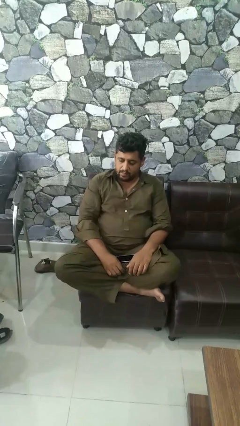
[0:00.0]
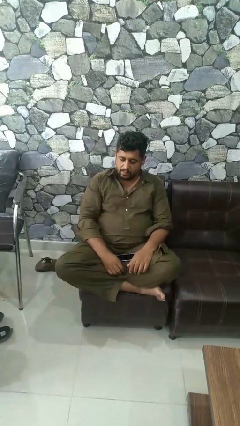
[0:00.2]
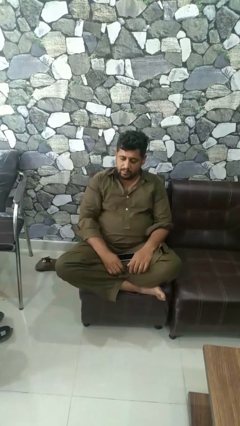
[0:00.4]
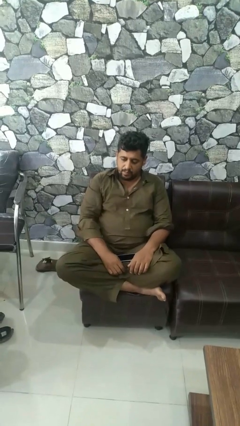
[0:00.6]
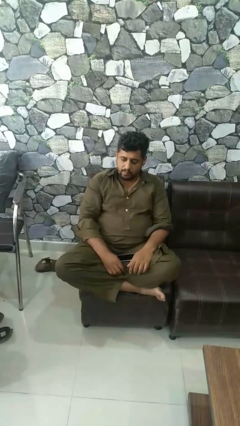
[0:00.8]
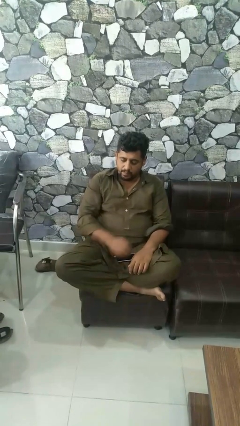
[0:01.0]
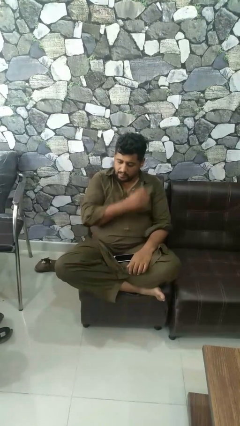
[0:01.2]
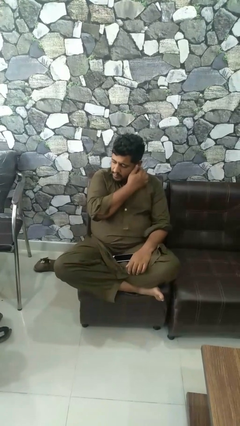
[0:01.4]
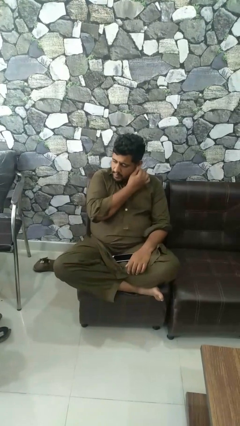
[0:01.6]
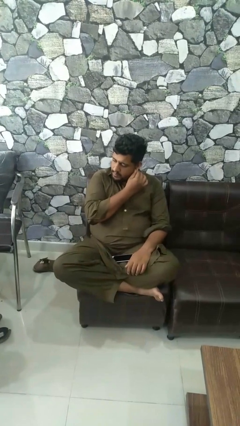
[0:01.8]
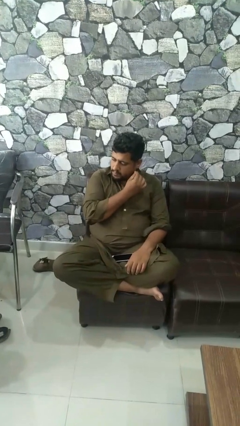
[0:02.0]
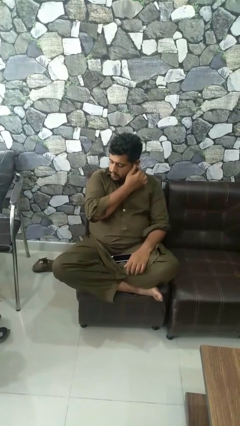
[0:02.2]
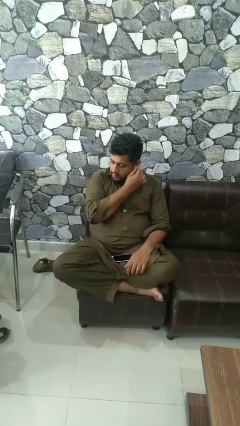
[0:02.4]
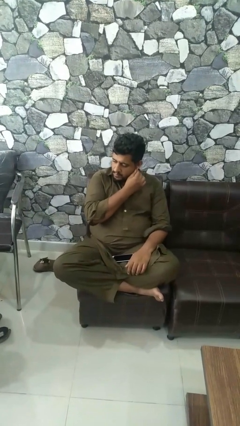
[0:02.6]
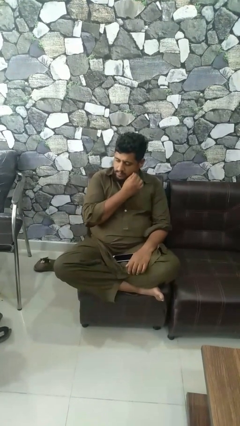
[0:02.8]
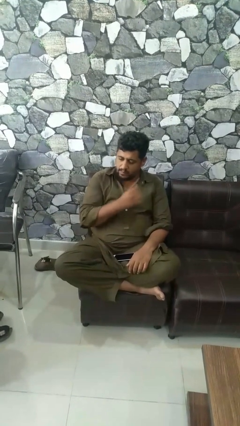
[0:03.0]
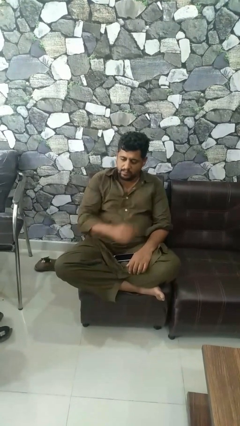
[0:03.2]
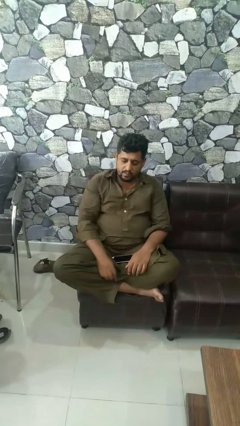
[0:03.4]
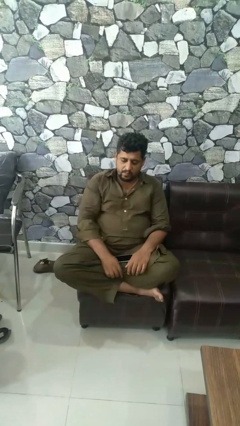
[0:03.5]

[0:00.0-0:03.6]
person touches earlobe

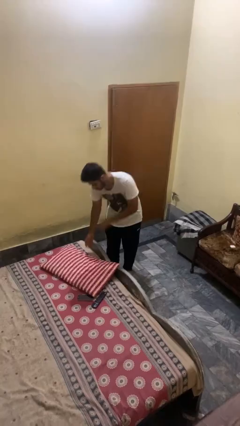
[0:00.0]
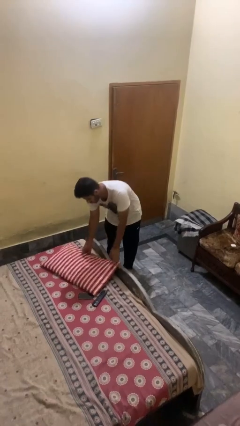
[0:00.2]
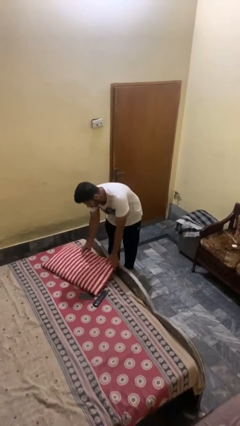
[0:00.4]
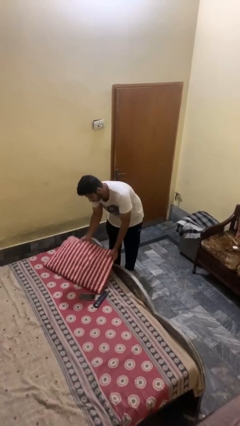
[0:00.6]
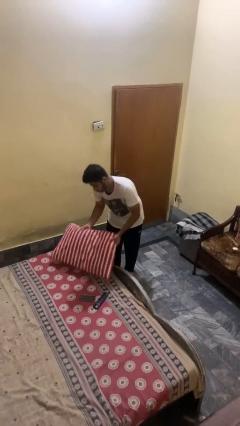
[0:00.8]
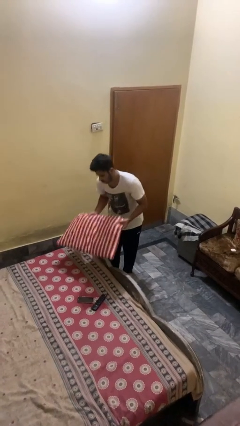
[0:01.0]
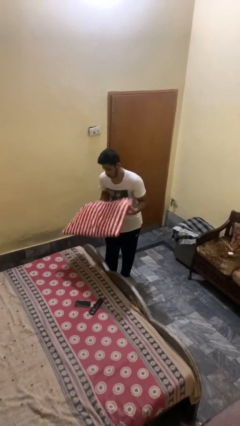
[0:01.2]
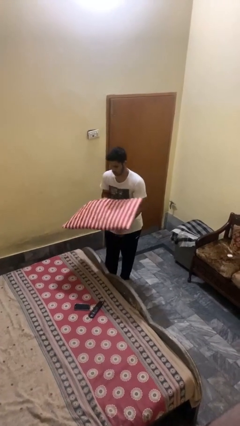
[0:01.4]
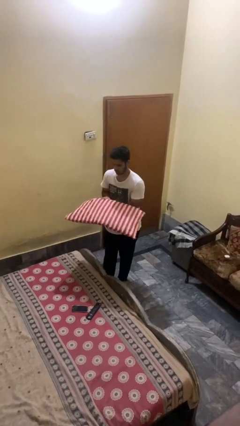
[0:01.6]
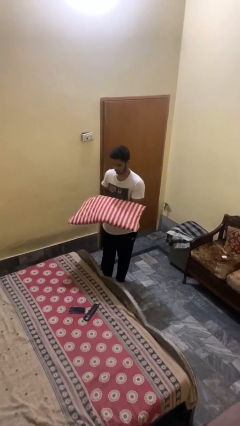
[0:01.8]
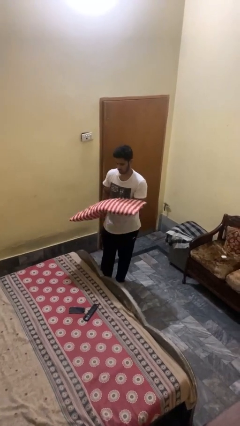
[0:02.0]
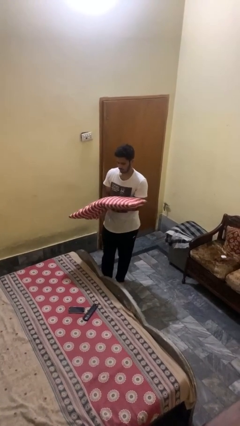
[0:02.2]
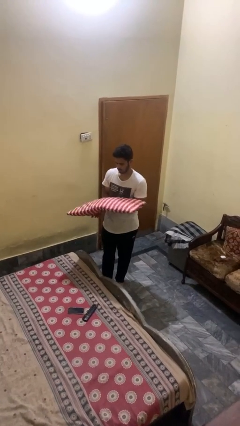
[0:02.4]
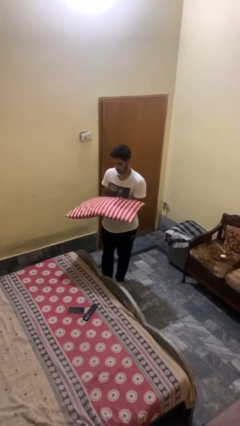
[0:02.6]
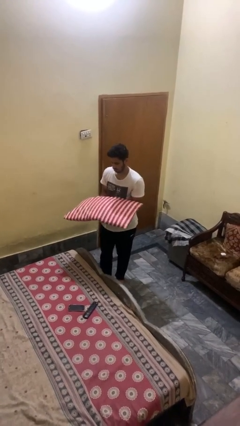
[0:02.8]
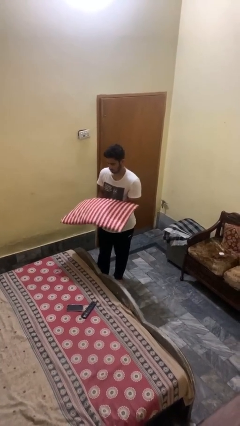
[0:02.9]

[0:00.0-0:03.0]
person picks up object from bed

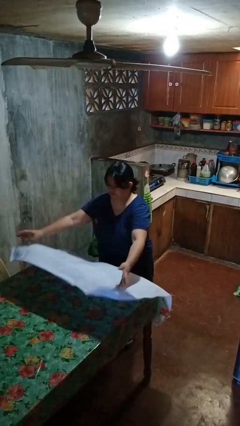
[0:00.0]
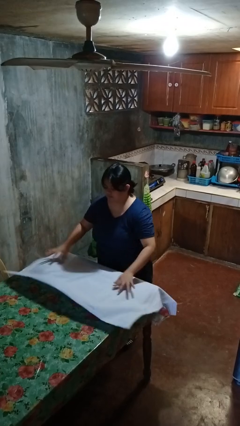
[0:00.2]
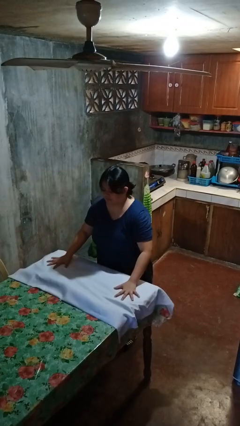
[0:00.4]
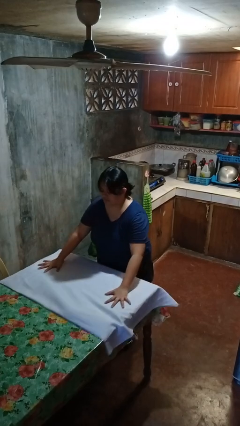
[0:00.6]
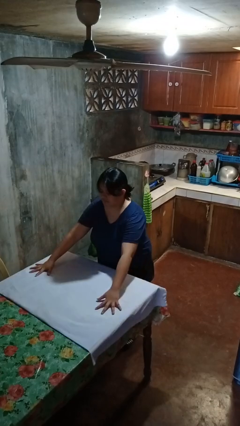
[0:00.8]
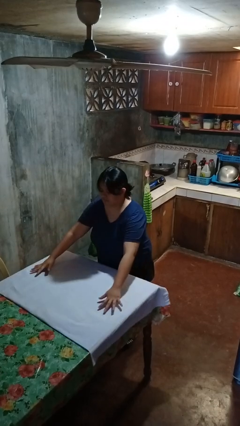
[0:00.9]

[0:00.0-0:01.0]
person spreads tablecloth

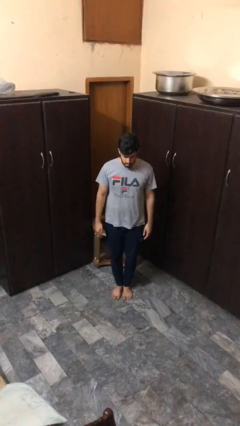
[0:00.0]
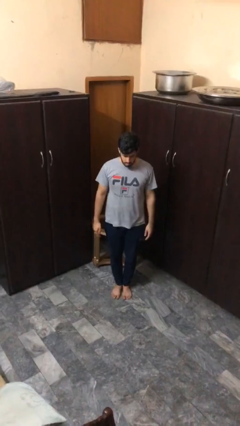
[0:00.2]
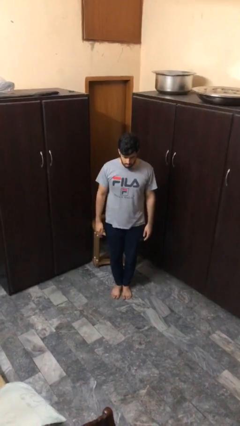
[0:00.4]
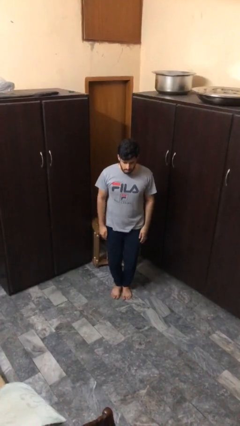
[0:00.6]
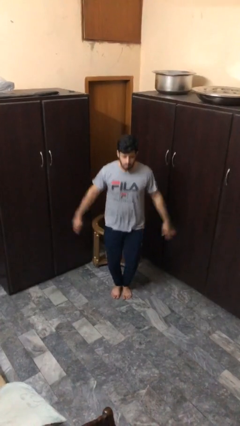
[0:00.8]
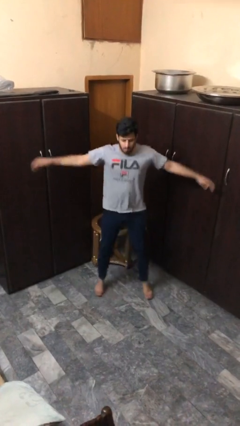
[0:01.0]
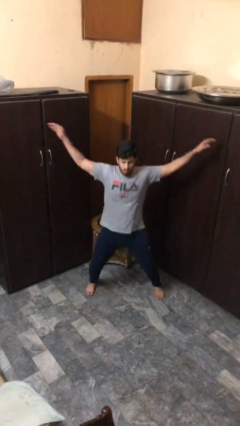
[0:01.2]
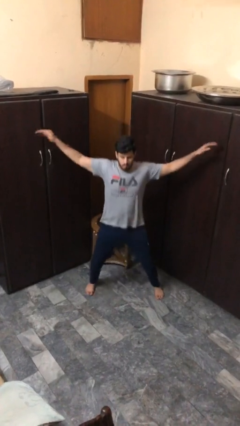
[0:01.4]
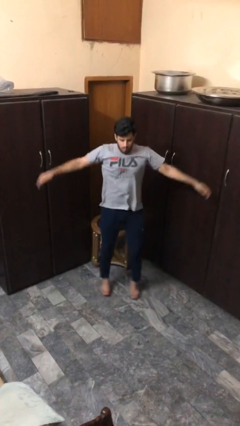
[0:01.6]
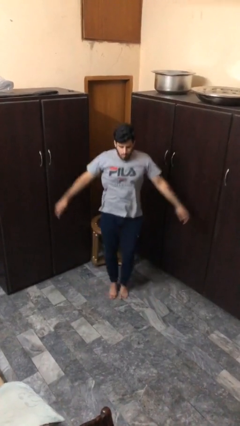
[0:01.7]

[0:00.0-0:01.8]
person exercises with jumping jacks

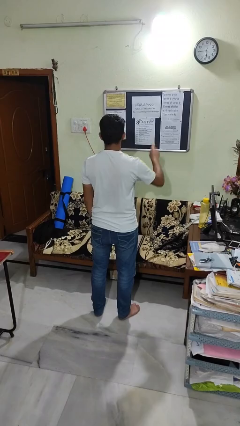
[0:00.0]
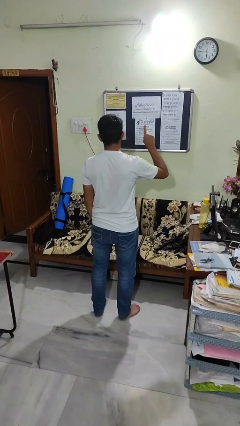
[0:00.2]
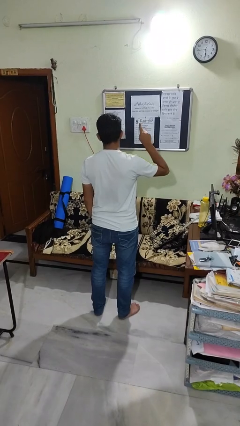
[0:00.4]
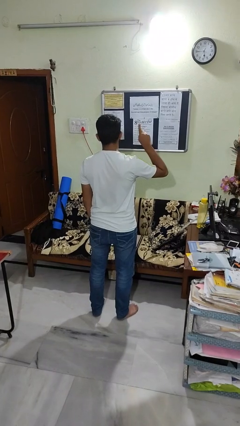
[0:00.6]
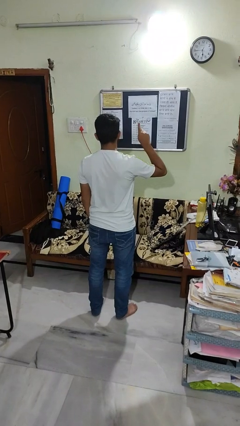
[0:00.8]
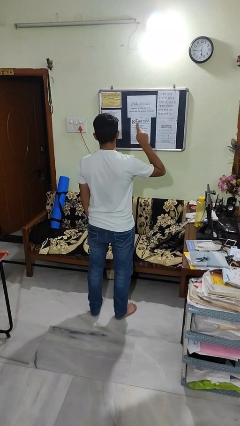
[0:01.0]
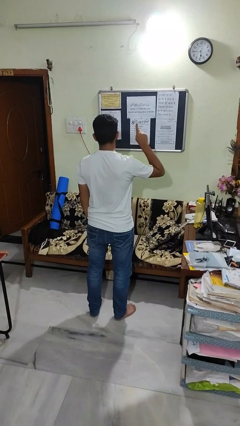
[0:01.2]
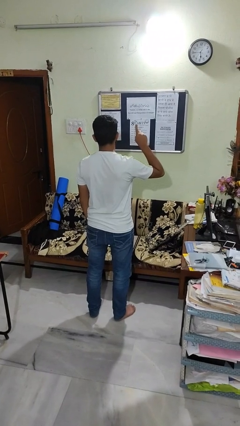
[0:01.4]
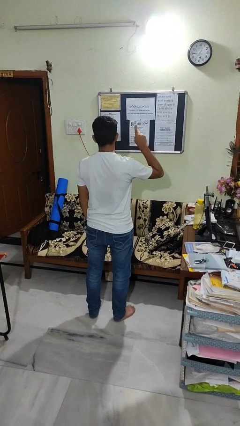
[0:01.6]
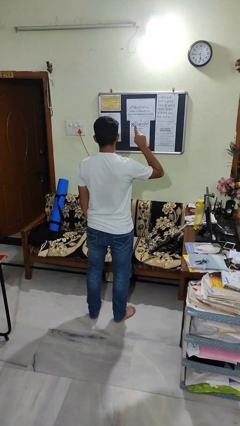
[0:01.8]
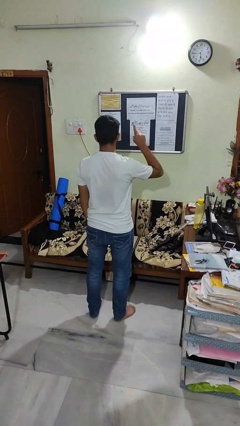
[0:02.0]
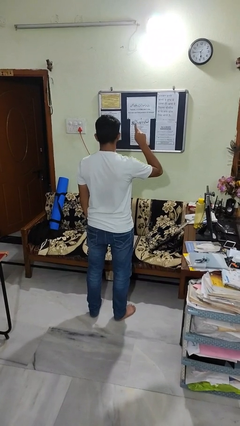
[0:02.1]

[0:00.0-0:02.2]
person gestures number one

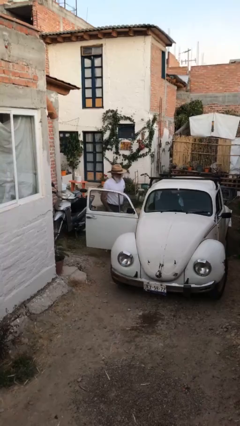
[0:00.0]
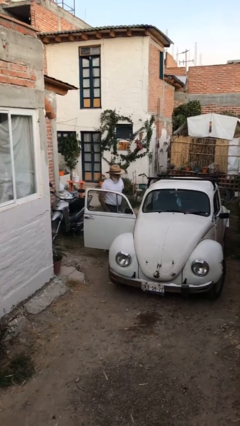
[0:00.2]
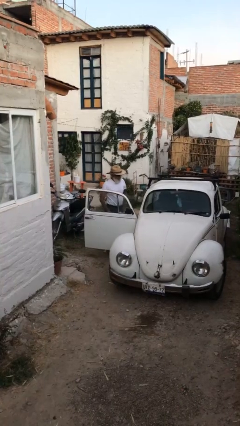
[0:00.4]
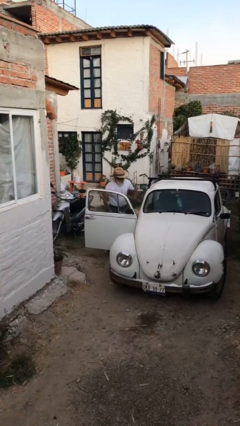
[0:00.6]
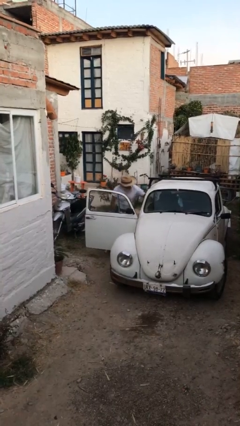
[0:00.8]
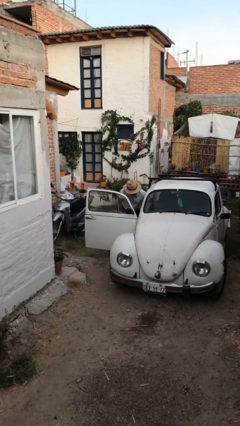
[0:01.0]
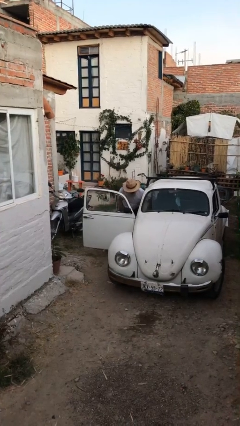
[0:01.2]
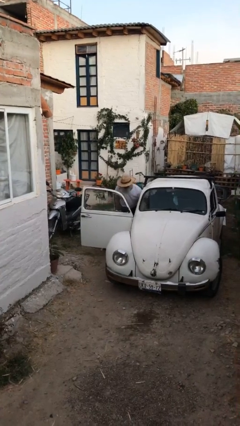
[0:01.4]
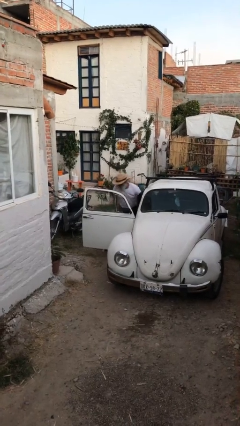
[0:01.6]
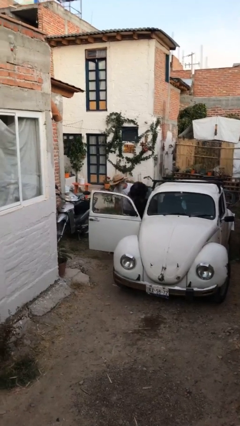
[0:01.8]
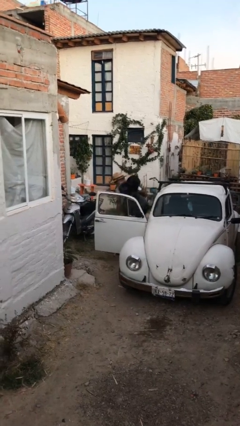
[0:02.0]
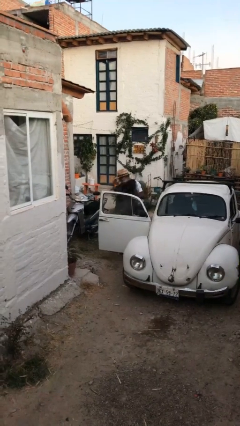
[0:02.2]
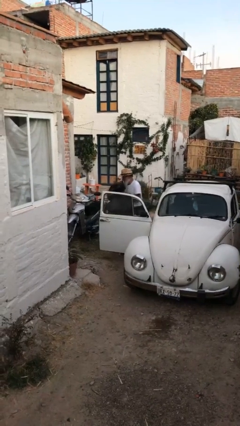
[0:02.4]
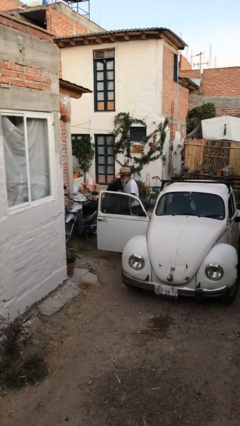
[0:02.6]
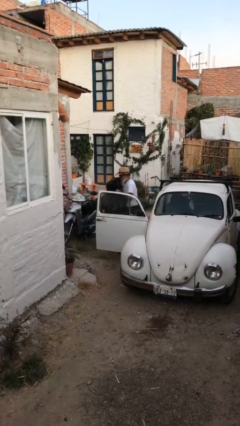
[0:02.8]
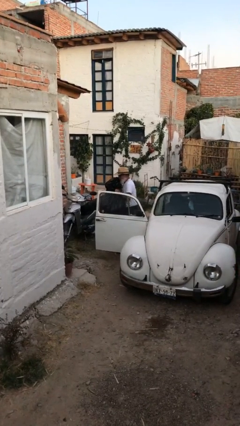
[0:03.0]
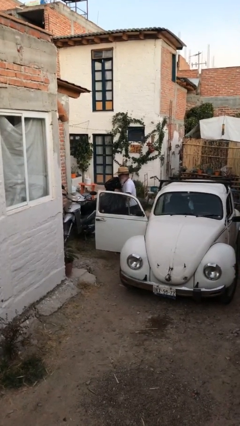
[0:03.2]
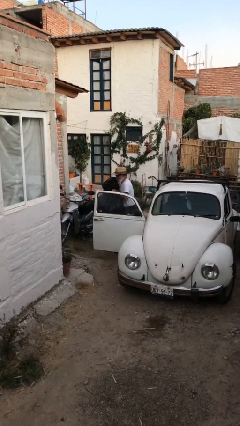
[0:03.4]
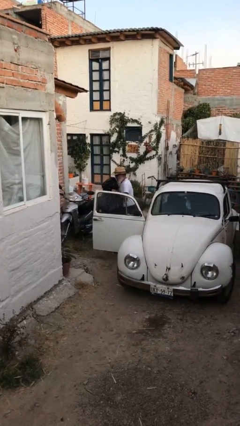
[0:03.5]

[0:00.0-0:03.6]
person unloads car

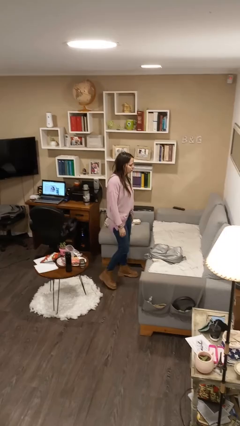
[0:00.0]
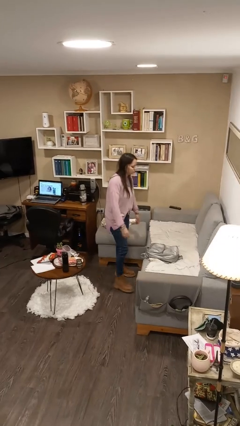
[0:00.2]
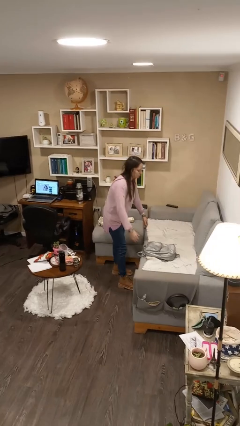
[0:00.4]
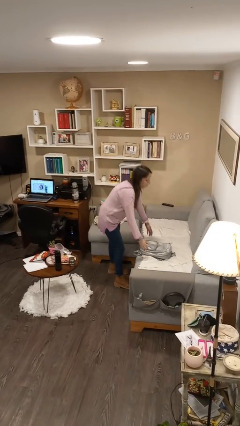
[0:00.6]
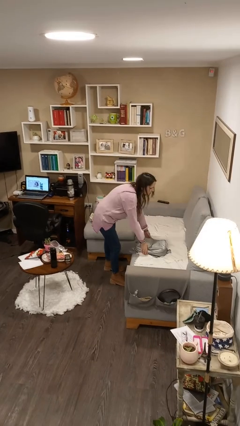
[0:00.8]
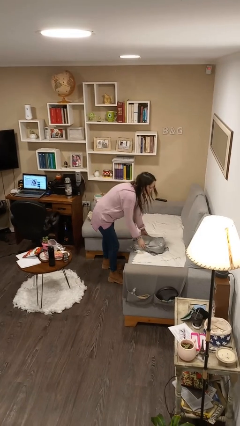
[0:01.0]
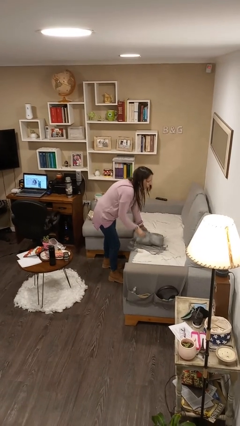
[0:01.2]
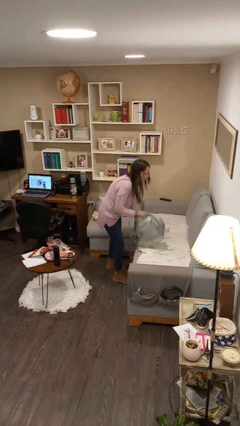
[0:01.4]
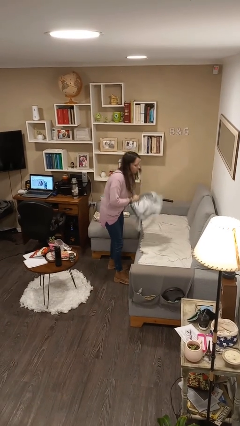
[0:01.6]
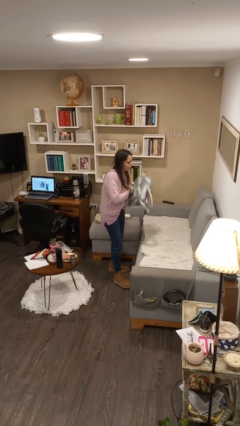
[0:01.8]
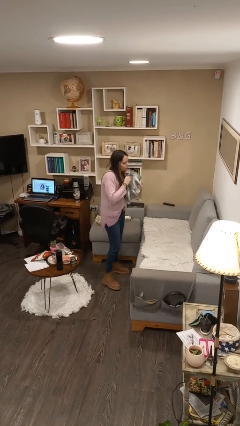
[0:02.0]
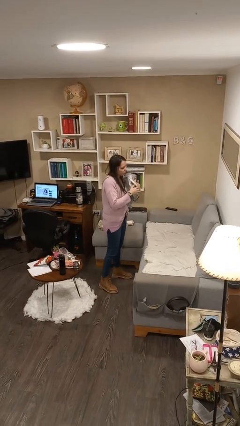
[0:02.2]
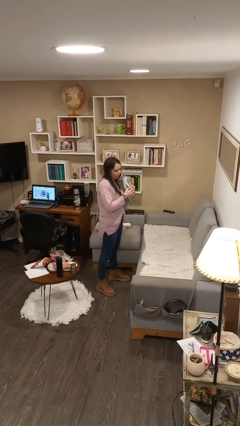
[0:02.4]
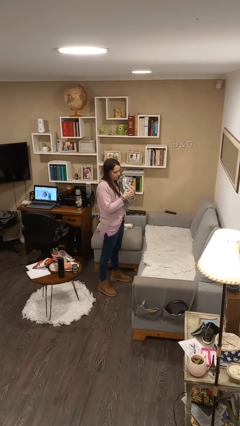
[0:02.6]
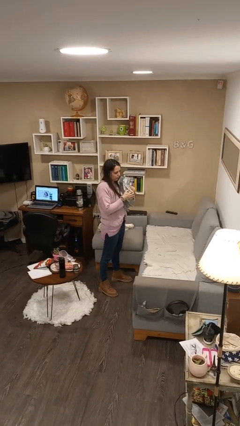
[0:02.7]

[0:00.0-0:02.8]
person picks up object from couch
